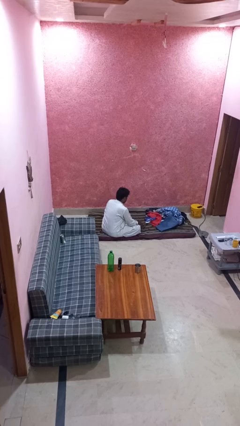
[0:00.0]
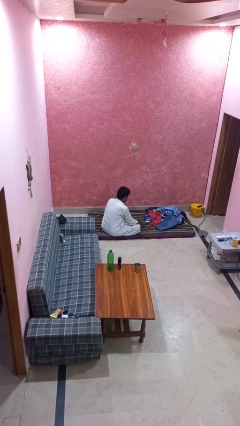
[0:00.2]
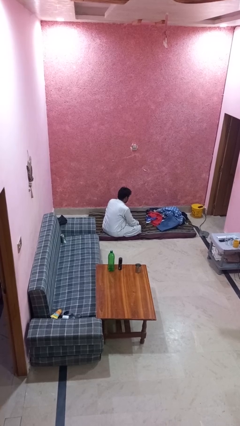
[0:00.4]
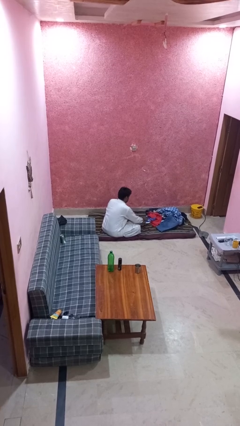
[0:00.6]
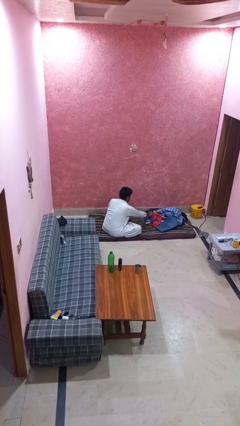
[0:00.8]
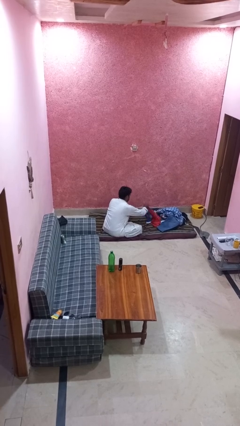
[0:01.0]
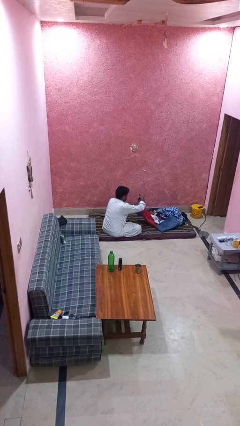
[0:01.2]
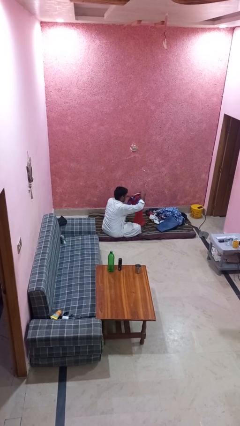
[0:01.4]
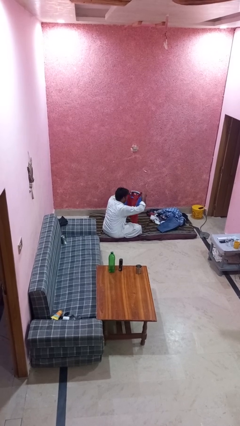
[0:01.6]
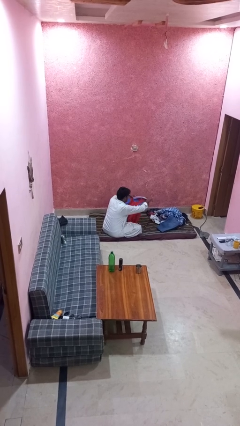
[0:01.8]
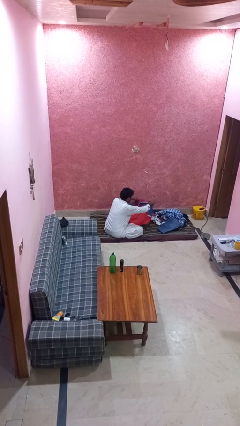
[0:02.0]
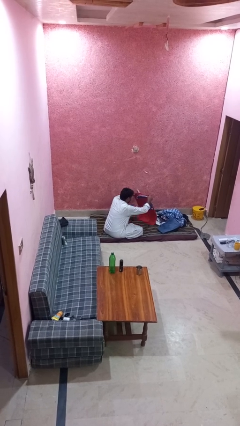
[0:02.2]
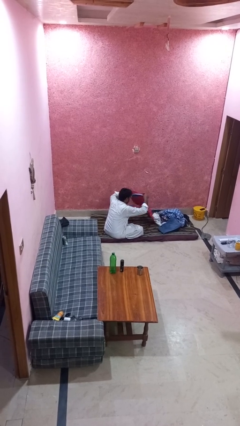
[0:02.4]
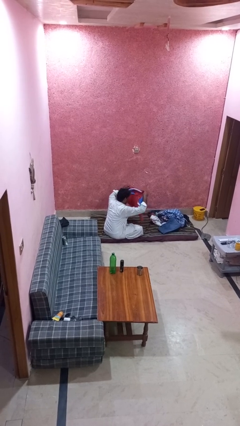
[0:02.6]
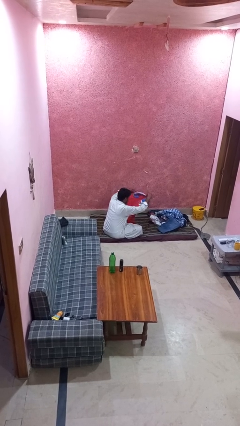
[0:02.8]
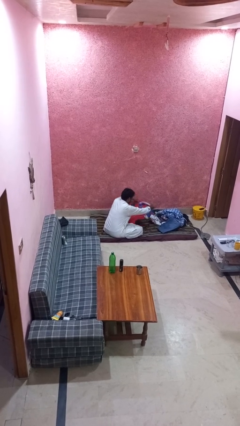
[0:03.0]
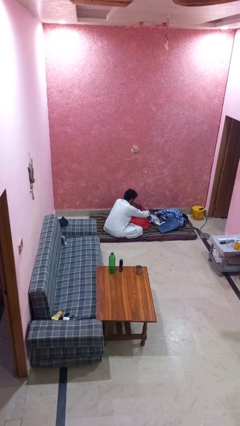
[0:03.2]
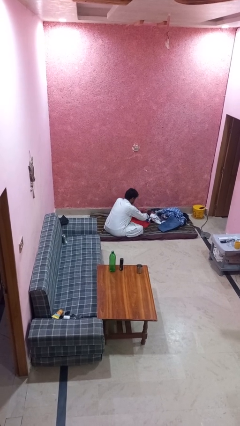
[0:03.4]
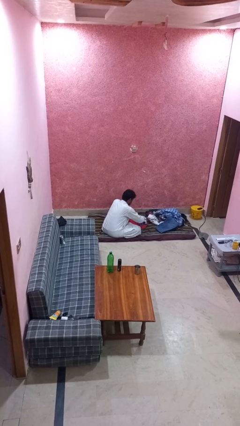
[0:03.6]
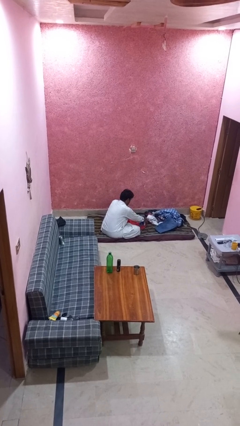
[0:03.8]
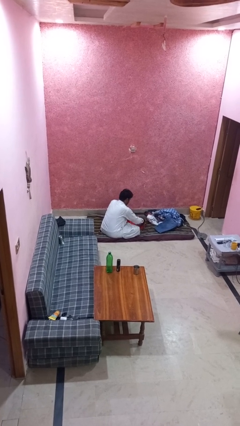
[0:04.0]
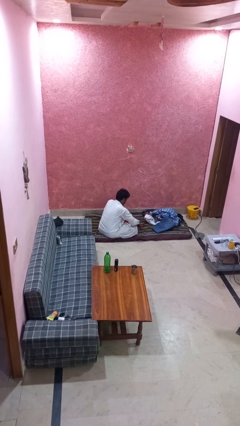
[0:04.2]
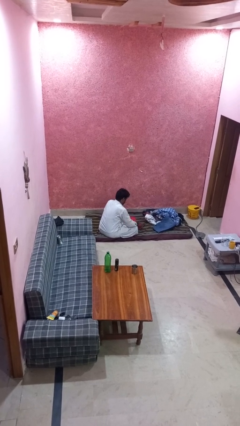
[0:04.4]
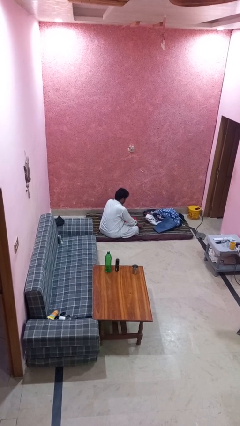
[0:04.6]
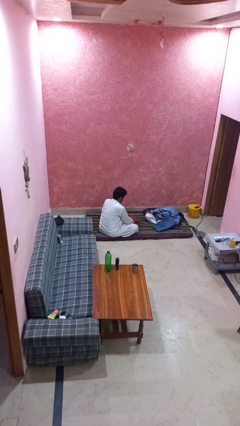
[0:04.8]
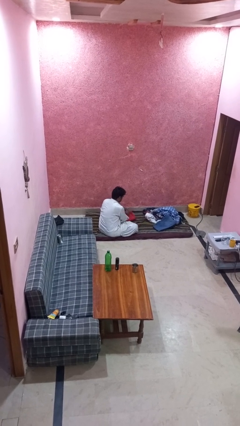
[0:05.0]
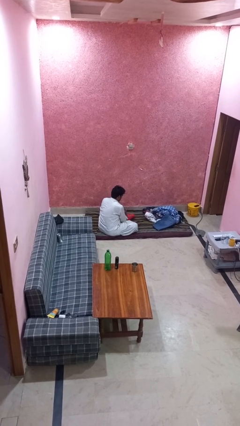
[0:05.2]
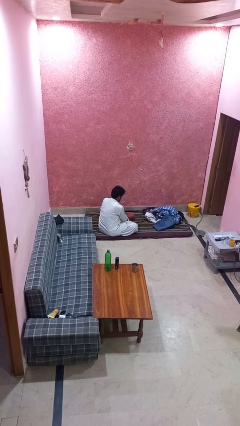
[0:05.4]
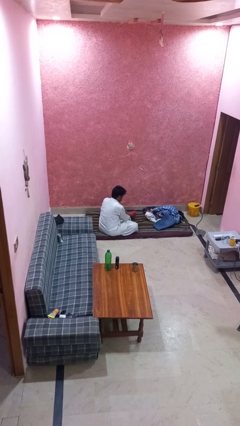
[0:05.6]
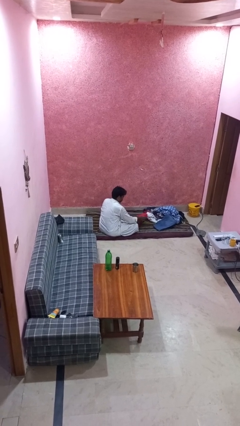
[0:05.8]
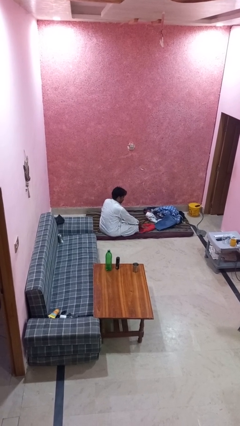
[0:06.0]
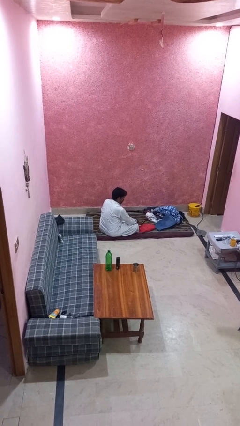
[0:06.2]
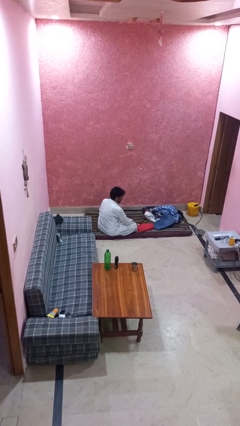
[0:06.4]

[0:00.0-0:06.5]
person folds shirt

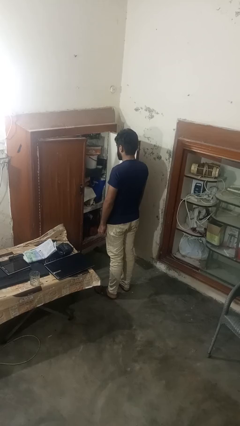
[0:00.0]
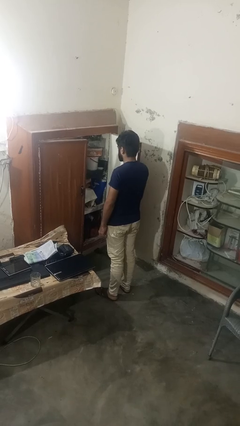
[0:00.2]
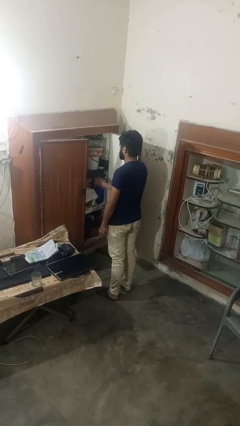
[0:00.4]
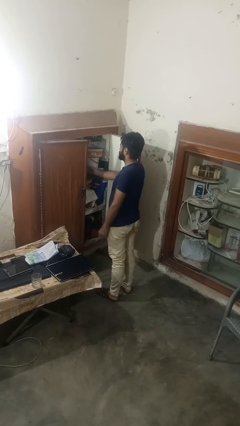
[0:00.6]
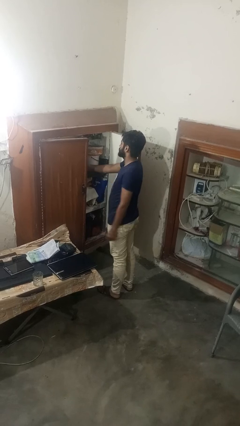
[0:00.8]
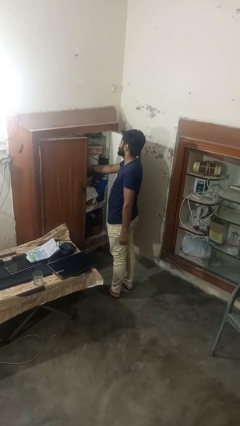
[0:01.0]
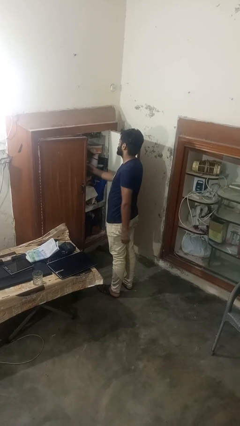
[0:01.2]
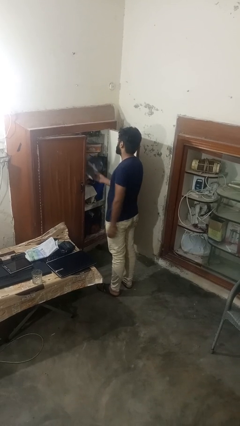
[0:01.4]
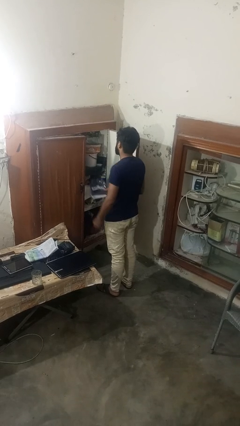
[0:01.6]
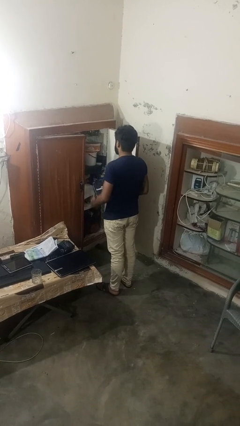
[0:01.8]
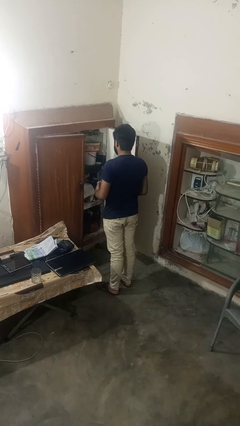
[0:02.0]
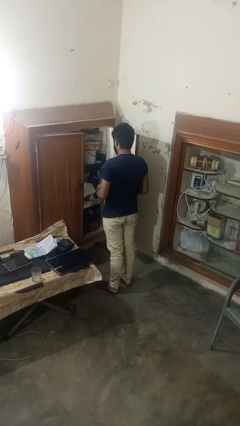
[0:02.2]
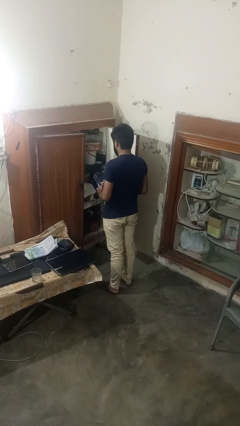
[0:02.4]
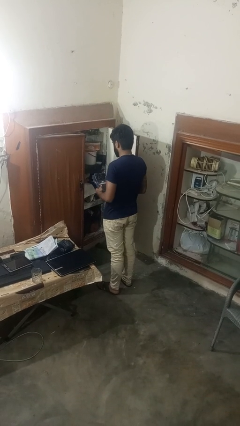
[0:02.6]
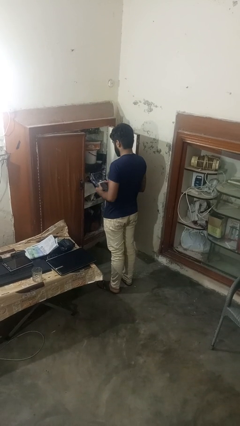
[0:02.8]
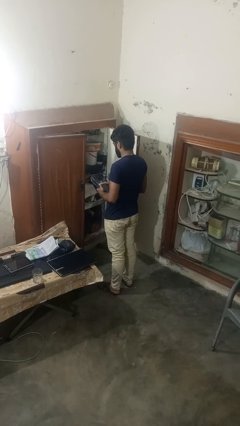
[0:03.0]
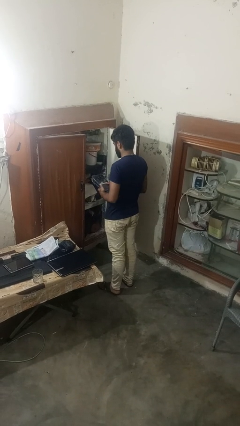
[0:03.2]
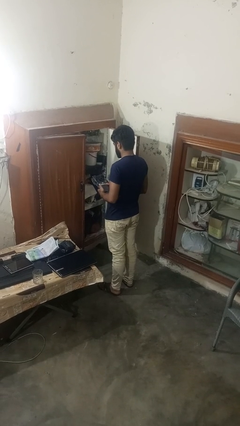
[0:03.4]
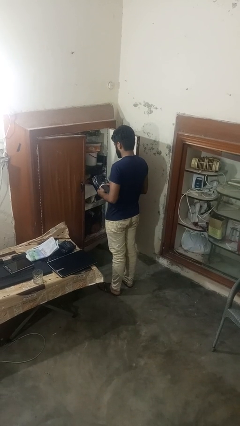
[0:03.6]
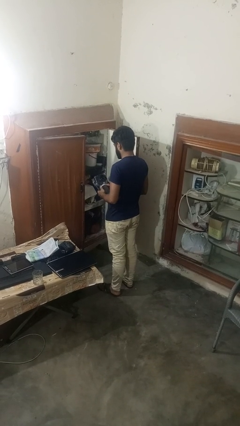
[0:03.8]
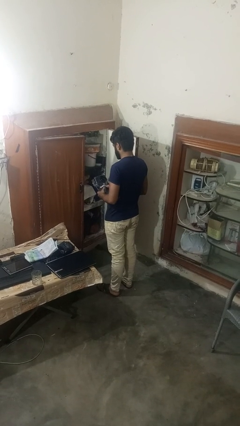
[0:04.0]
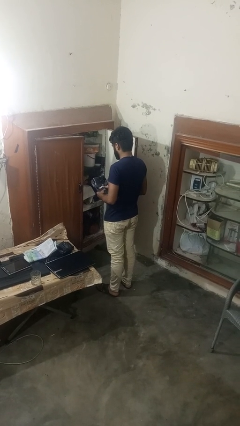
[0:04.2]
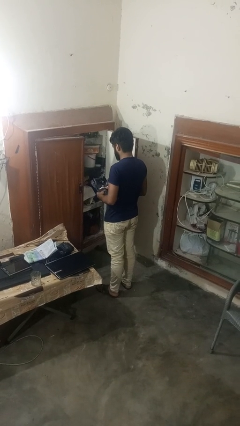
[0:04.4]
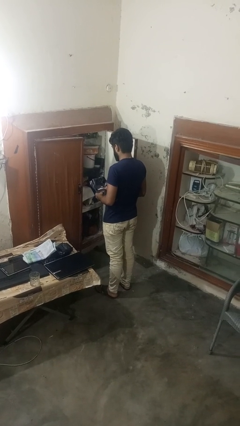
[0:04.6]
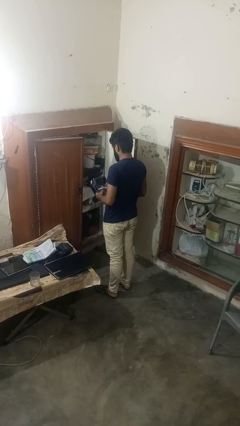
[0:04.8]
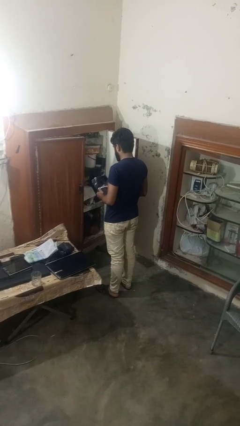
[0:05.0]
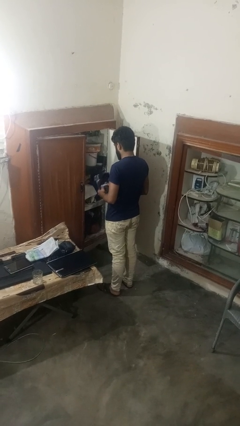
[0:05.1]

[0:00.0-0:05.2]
person picks up object from cabinet

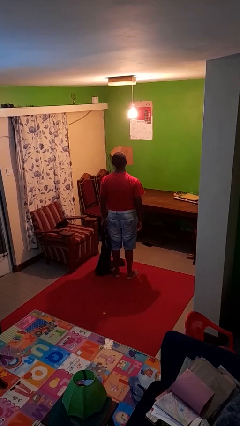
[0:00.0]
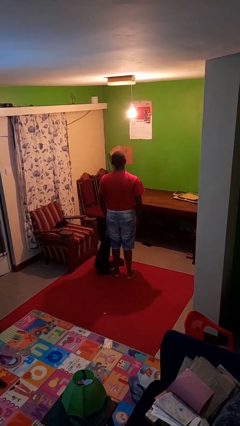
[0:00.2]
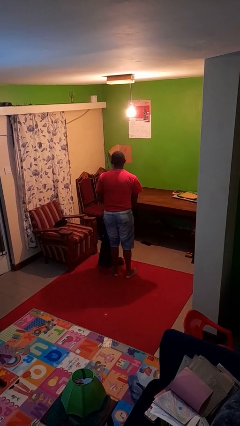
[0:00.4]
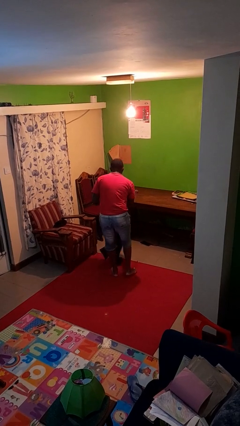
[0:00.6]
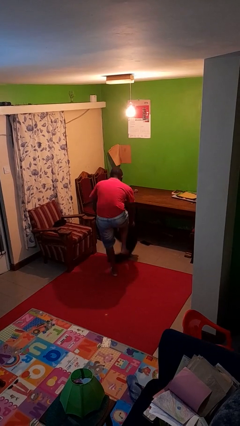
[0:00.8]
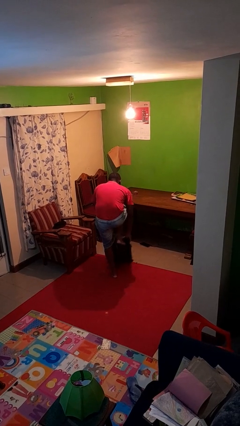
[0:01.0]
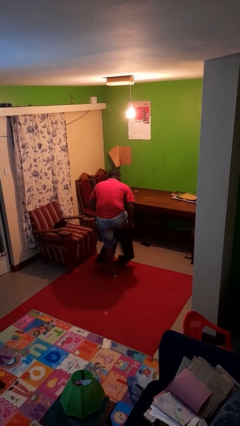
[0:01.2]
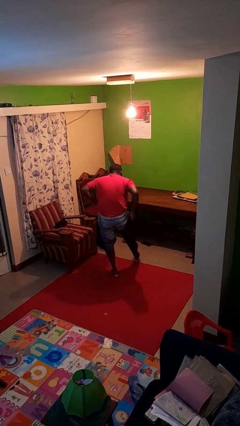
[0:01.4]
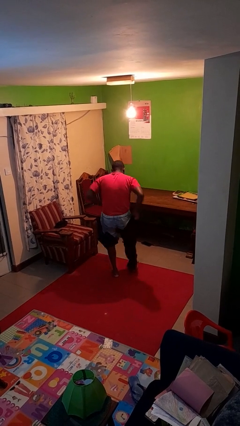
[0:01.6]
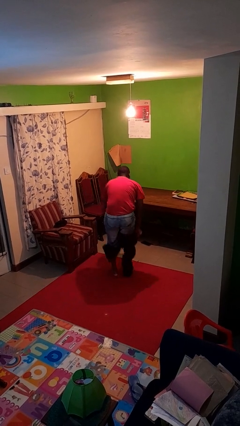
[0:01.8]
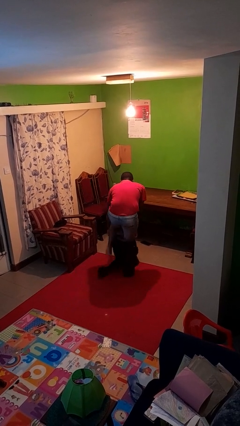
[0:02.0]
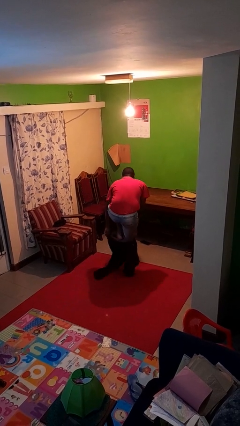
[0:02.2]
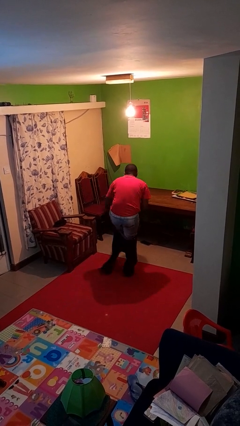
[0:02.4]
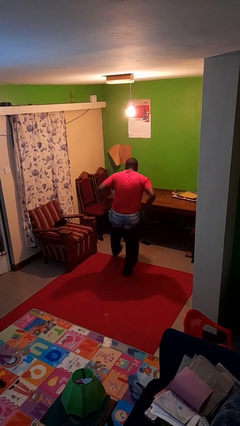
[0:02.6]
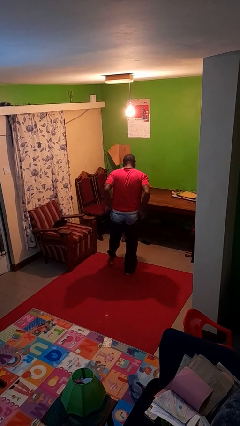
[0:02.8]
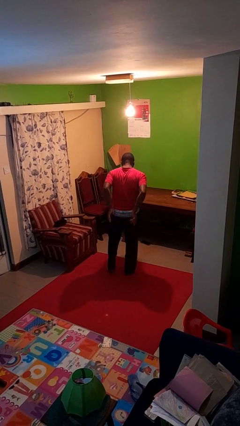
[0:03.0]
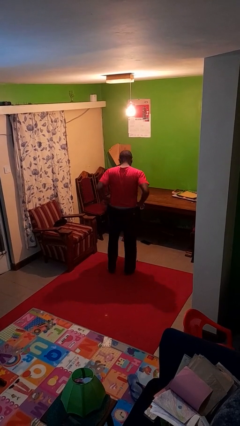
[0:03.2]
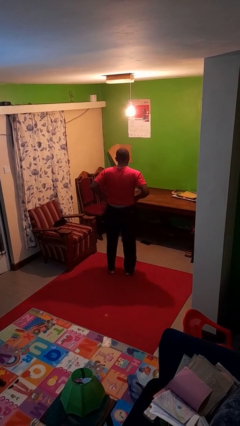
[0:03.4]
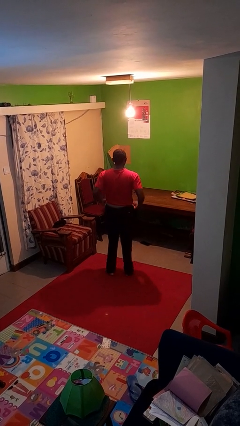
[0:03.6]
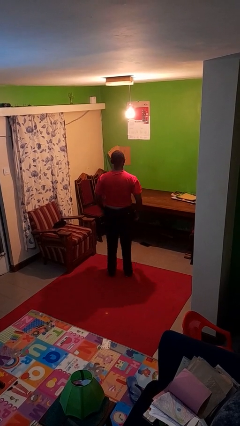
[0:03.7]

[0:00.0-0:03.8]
person puts on pants

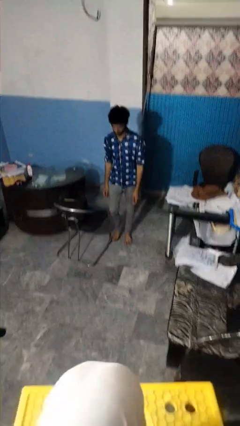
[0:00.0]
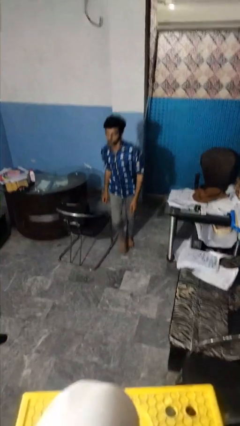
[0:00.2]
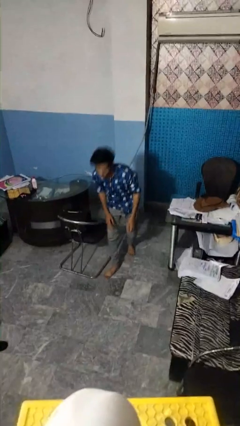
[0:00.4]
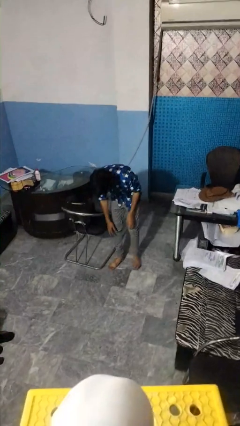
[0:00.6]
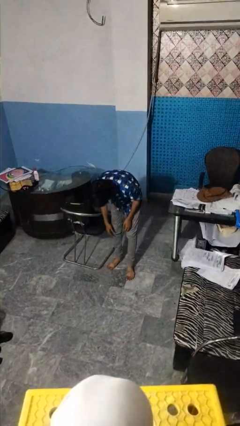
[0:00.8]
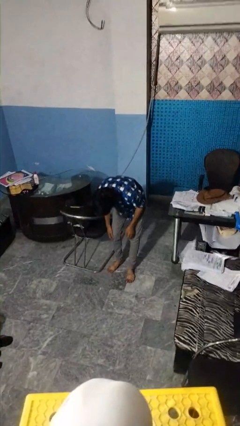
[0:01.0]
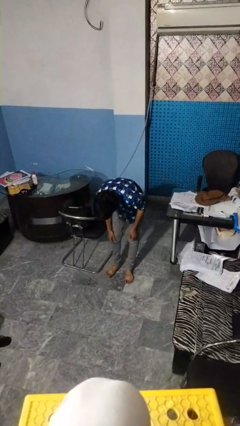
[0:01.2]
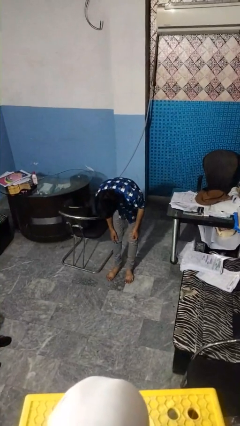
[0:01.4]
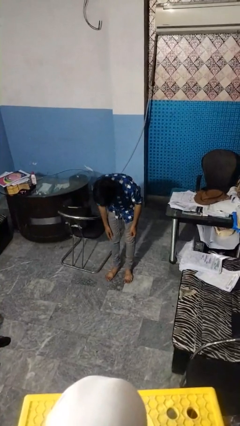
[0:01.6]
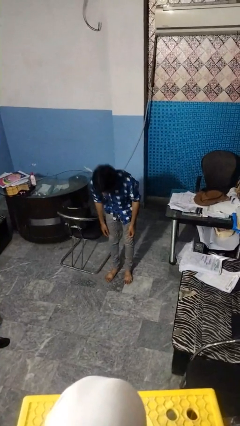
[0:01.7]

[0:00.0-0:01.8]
person stubs toe
